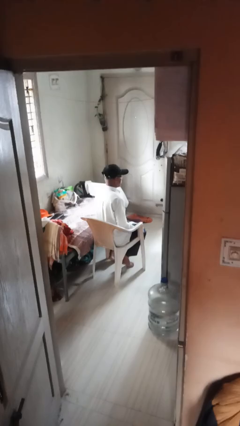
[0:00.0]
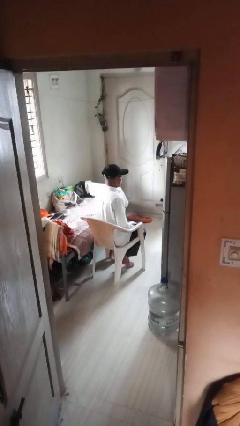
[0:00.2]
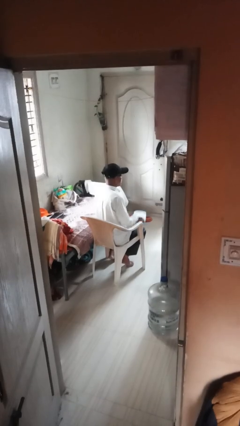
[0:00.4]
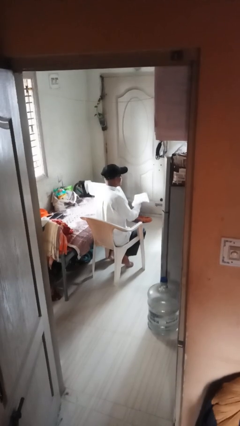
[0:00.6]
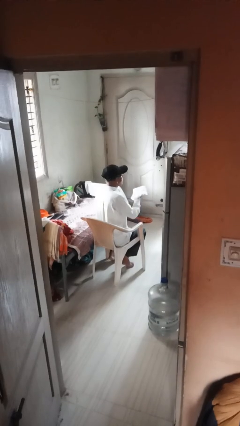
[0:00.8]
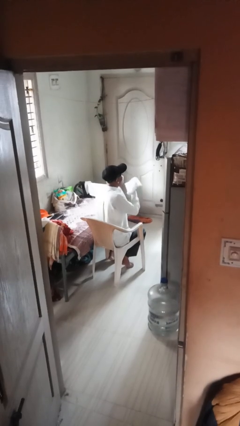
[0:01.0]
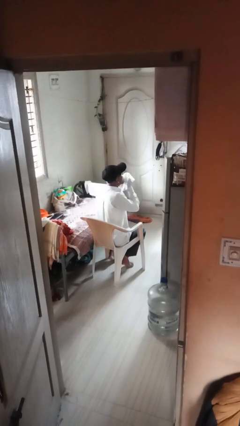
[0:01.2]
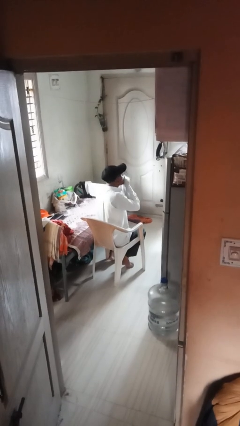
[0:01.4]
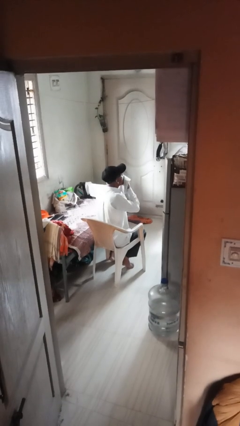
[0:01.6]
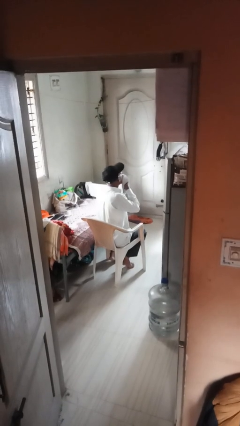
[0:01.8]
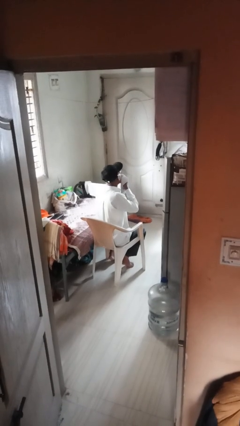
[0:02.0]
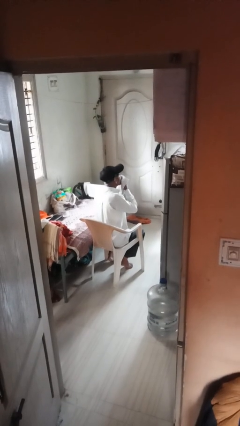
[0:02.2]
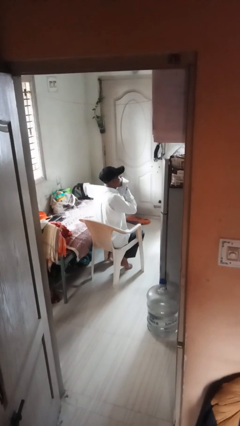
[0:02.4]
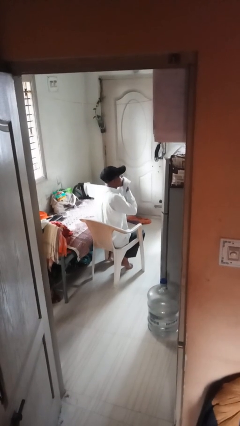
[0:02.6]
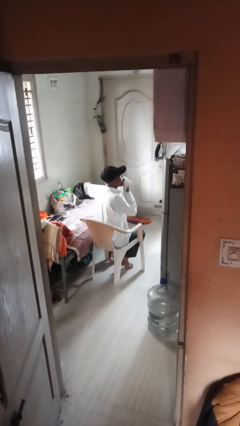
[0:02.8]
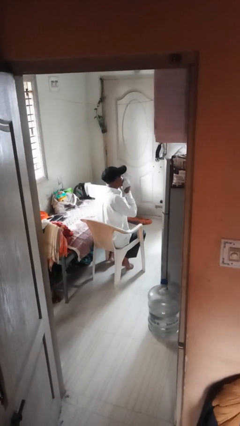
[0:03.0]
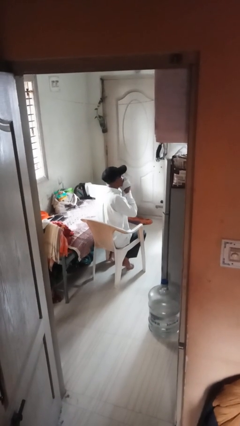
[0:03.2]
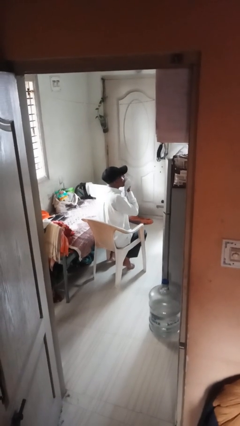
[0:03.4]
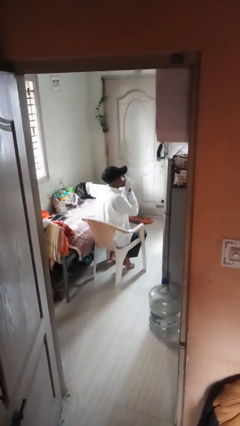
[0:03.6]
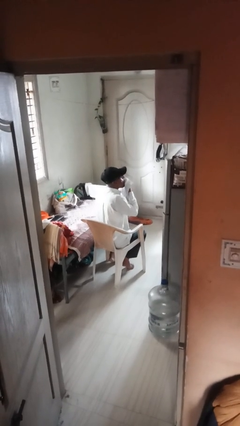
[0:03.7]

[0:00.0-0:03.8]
person wipes mouth with napkin

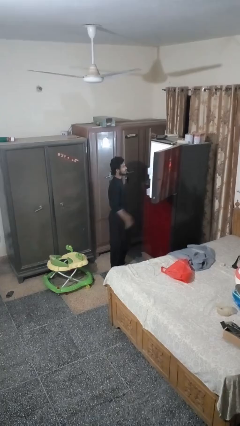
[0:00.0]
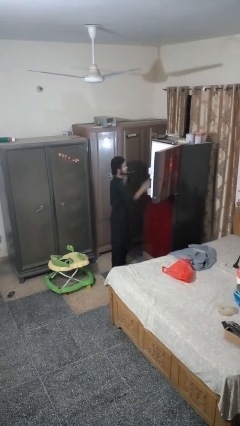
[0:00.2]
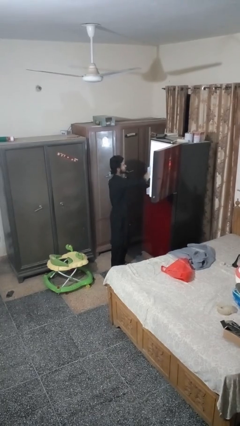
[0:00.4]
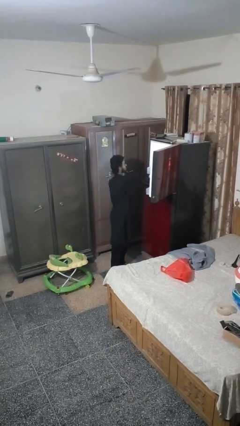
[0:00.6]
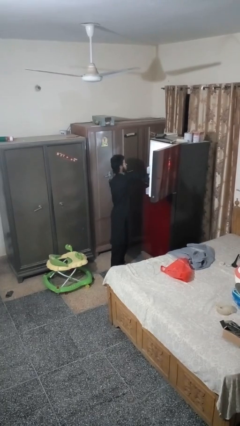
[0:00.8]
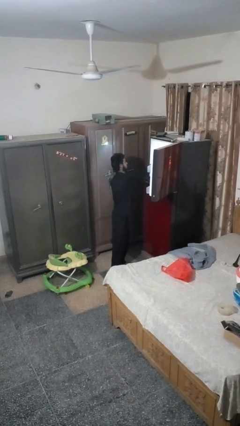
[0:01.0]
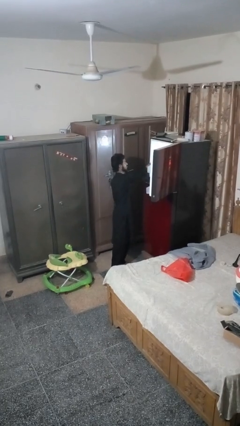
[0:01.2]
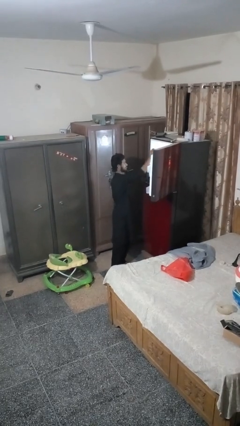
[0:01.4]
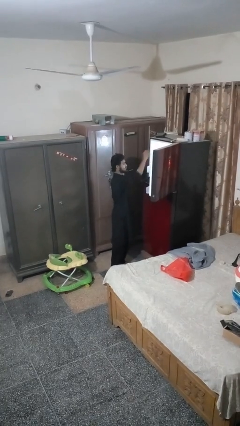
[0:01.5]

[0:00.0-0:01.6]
person takes object from refrigerator

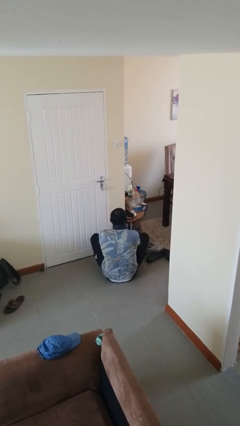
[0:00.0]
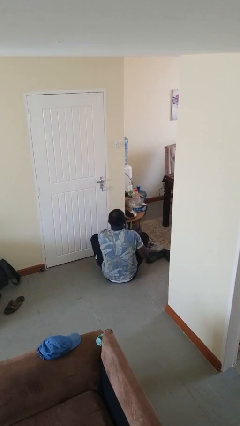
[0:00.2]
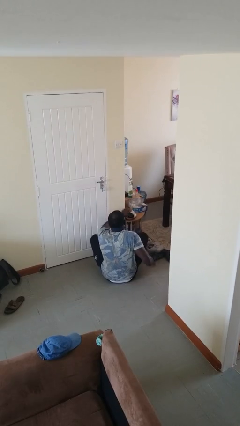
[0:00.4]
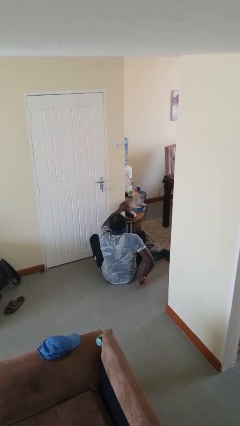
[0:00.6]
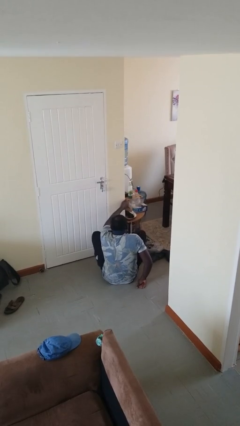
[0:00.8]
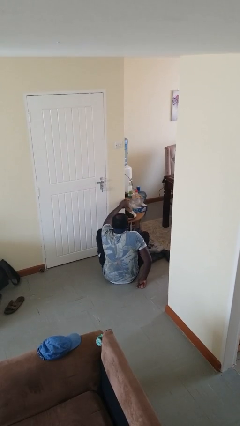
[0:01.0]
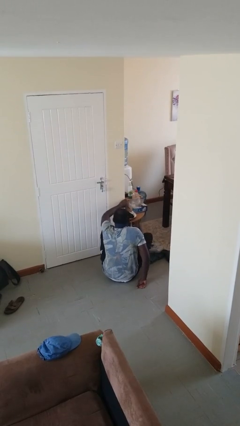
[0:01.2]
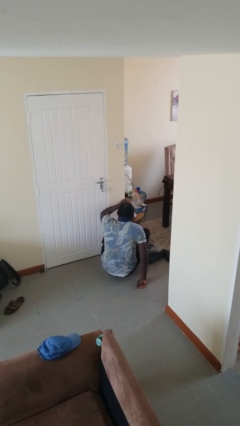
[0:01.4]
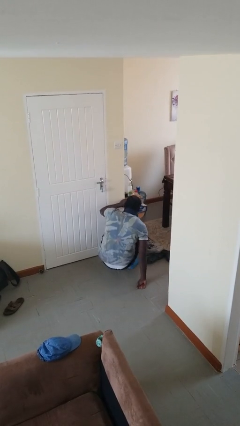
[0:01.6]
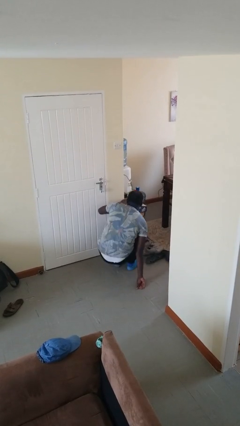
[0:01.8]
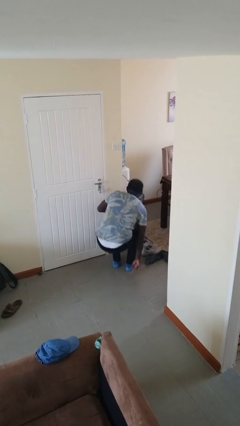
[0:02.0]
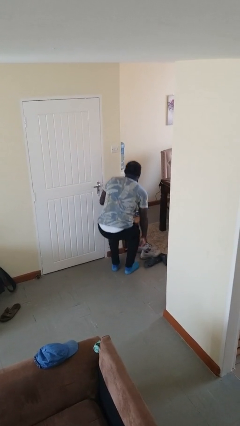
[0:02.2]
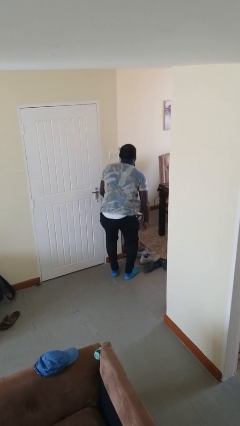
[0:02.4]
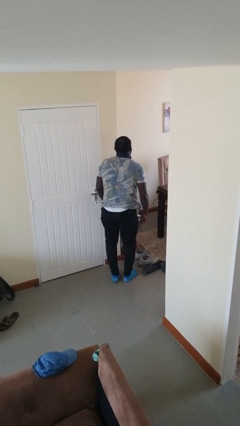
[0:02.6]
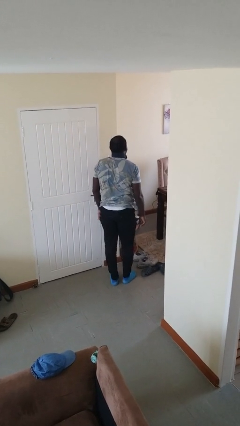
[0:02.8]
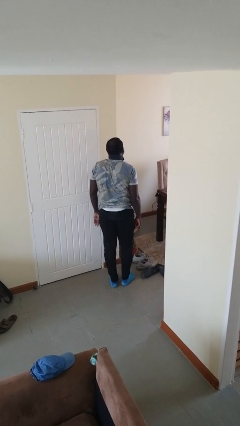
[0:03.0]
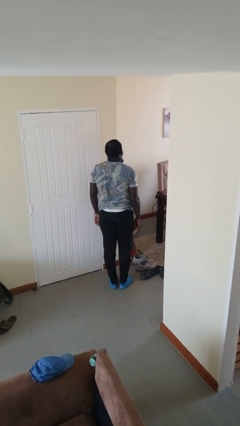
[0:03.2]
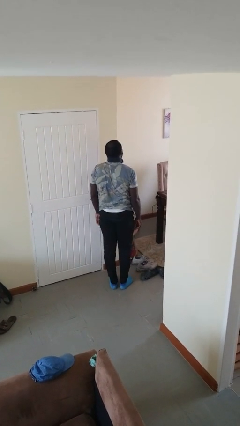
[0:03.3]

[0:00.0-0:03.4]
person stands up from floor

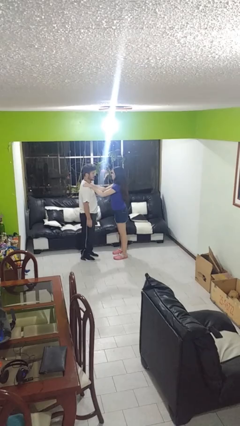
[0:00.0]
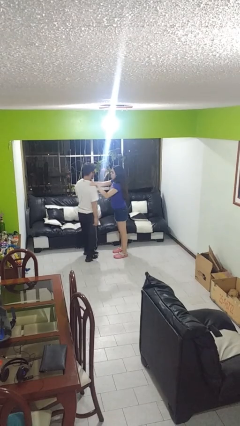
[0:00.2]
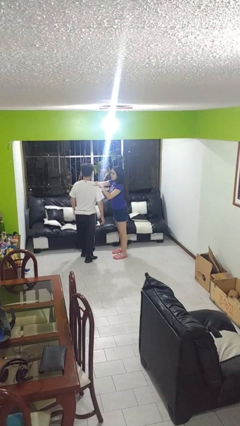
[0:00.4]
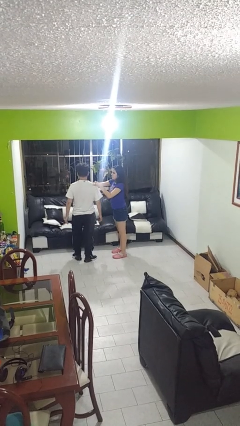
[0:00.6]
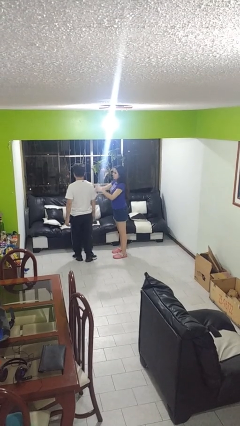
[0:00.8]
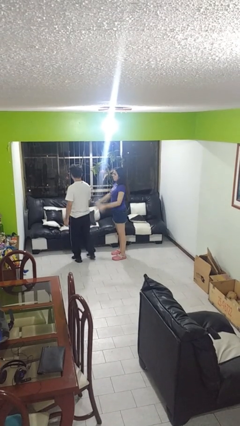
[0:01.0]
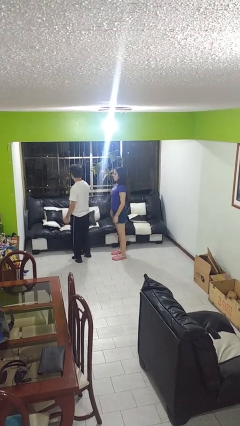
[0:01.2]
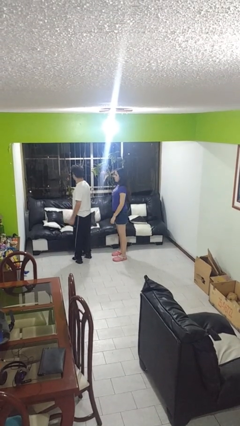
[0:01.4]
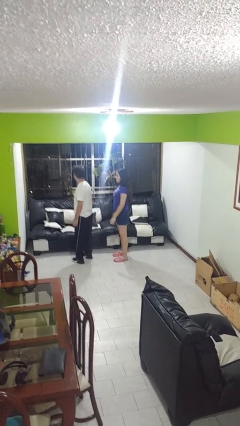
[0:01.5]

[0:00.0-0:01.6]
person spins person around

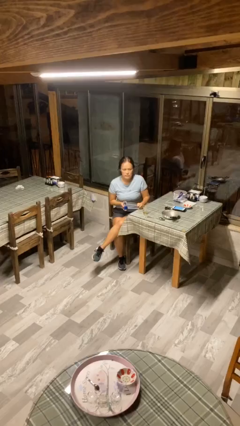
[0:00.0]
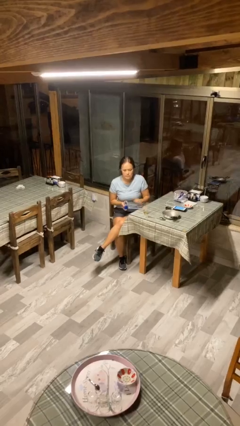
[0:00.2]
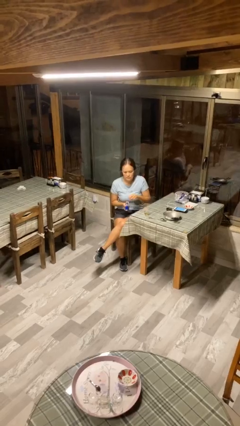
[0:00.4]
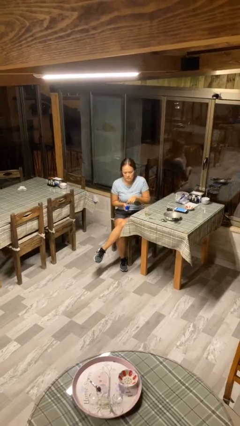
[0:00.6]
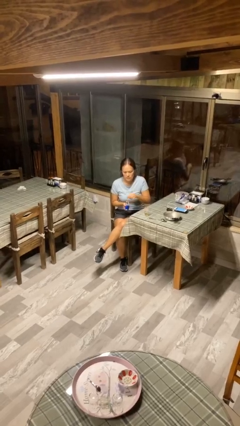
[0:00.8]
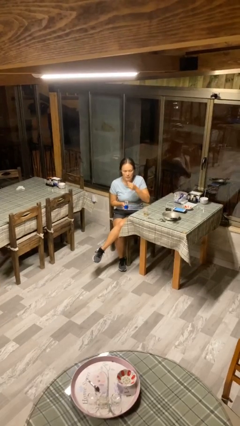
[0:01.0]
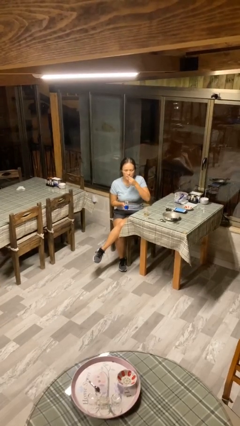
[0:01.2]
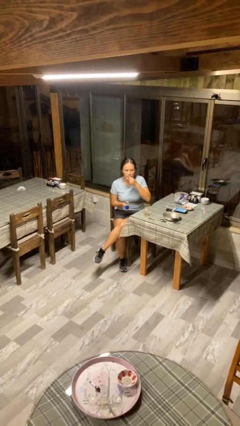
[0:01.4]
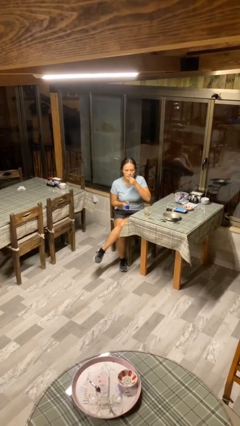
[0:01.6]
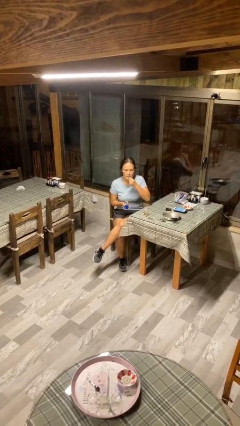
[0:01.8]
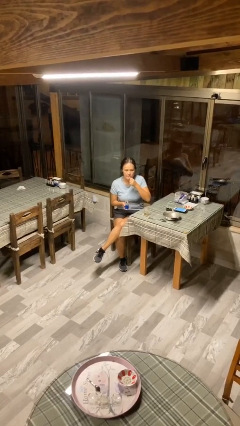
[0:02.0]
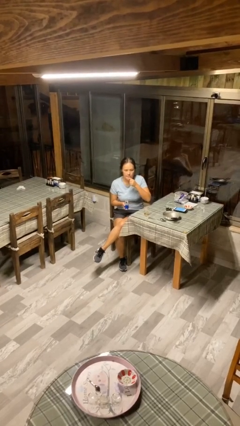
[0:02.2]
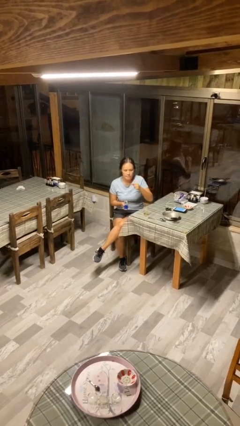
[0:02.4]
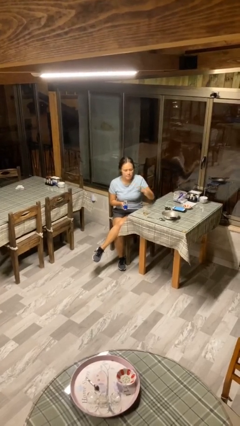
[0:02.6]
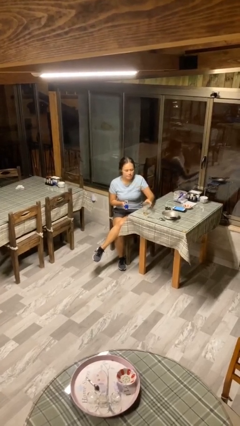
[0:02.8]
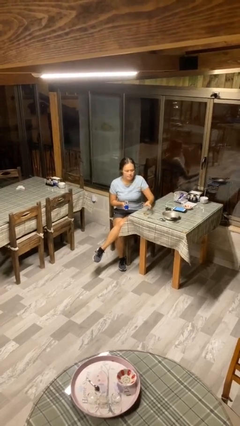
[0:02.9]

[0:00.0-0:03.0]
person takes medicine pills

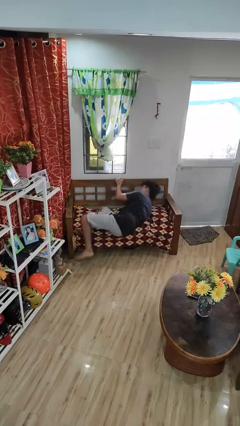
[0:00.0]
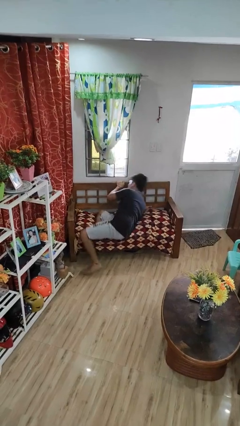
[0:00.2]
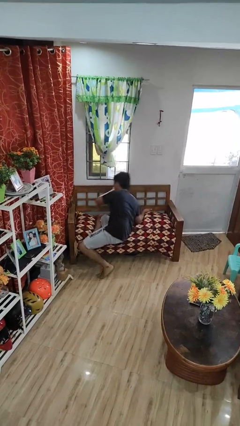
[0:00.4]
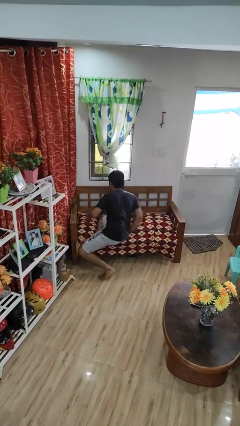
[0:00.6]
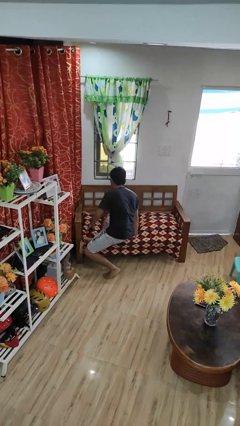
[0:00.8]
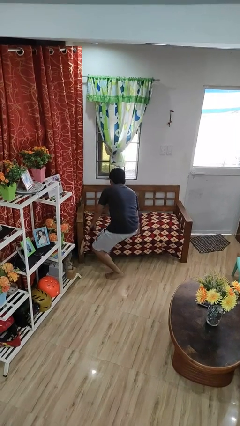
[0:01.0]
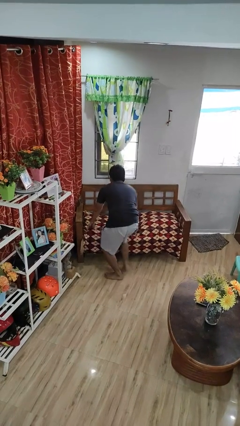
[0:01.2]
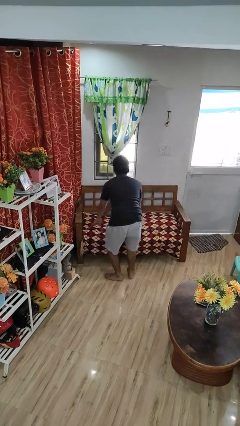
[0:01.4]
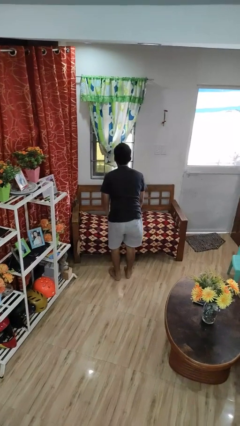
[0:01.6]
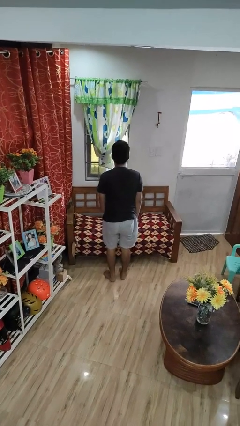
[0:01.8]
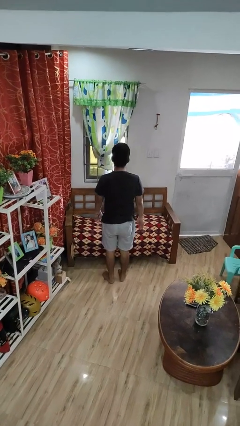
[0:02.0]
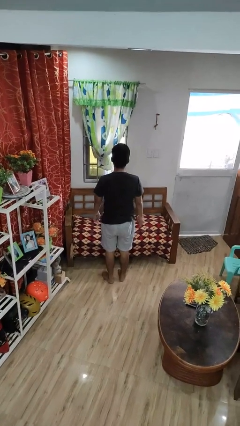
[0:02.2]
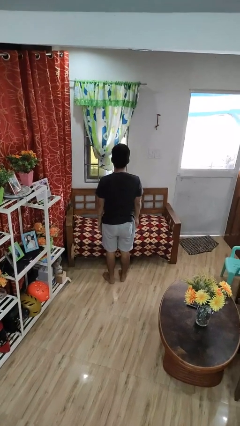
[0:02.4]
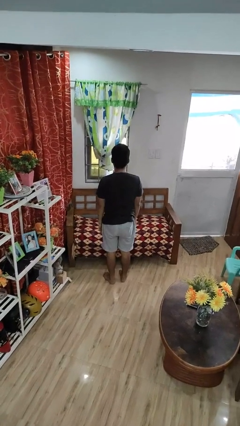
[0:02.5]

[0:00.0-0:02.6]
person stands up

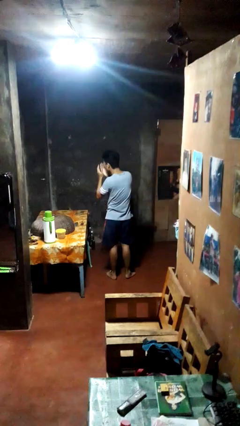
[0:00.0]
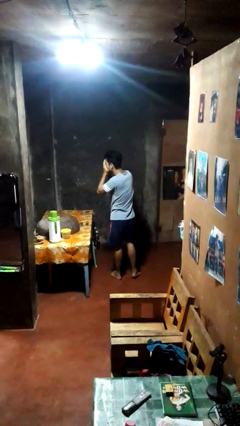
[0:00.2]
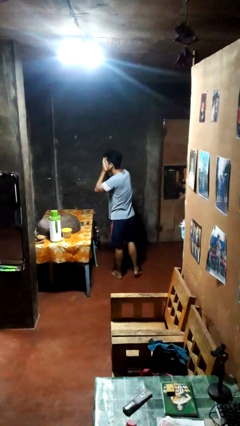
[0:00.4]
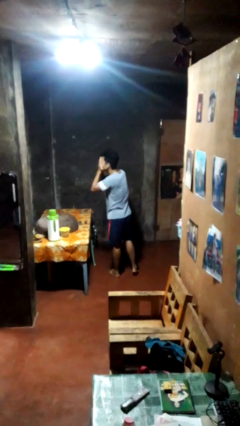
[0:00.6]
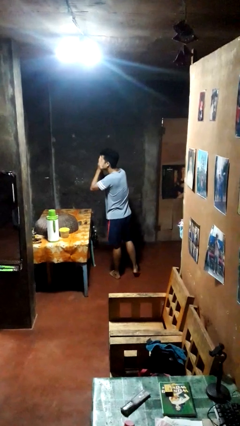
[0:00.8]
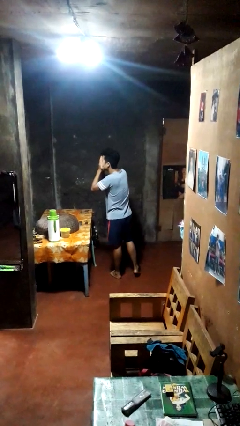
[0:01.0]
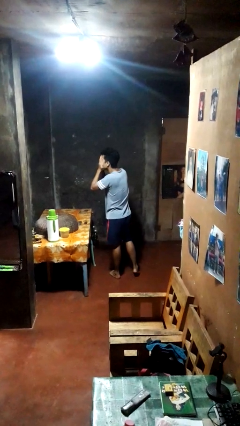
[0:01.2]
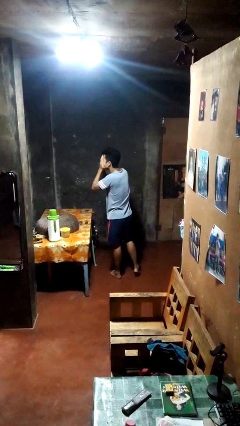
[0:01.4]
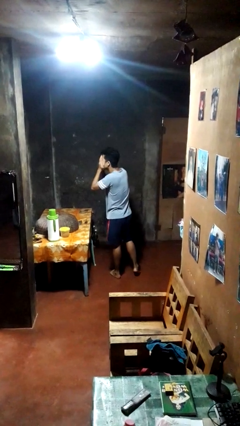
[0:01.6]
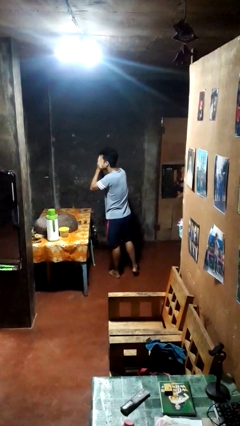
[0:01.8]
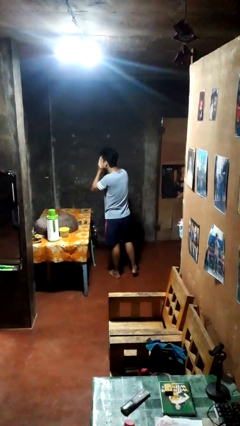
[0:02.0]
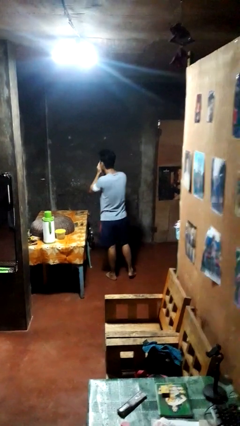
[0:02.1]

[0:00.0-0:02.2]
person covers face with hands
